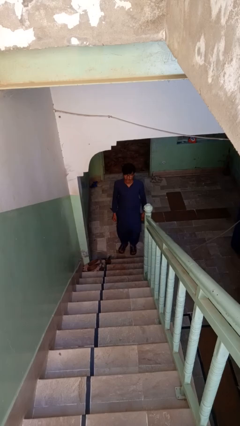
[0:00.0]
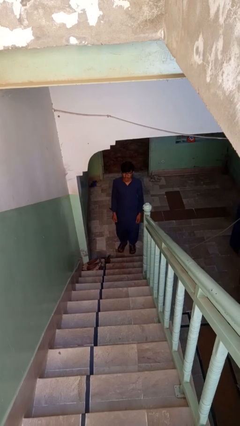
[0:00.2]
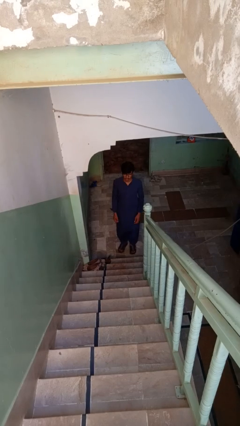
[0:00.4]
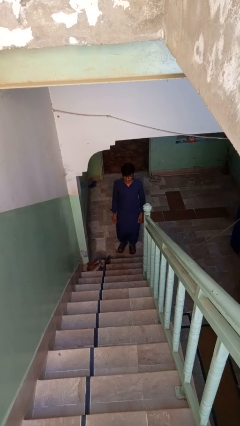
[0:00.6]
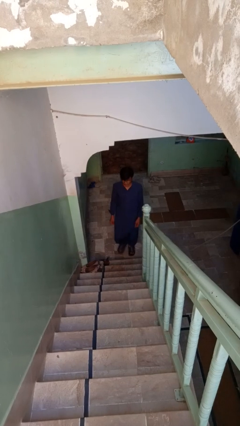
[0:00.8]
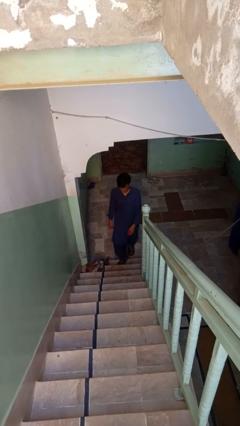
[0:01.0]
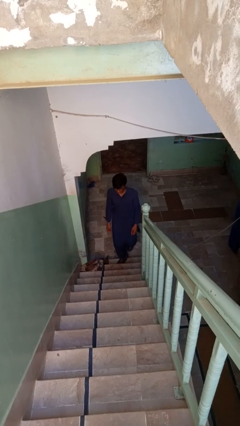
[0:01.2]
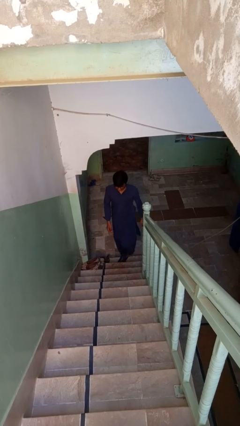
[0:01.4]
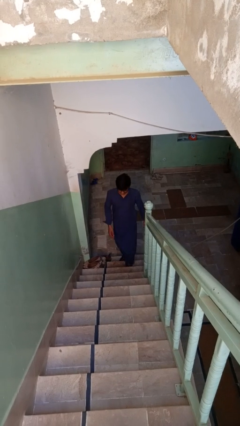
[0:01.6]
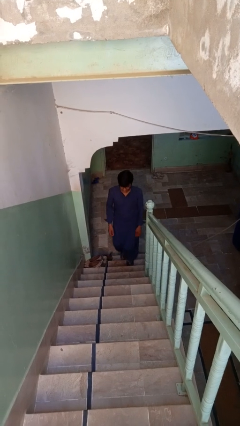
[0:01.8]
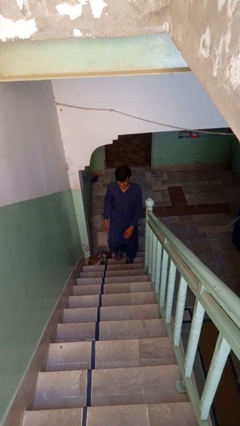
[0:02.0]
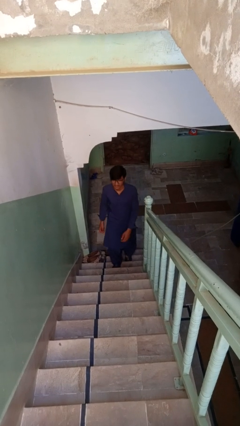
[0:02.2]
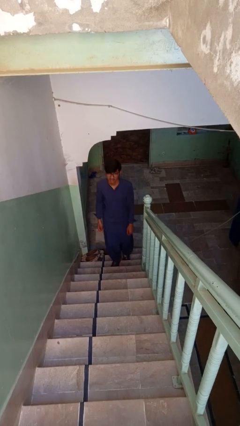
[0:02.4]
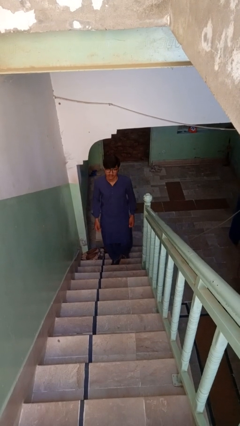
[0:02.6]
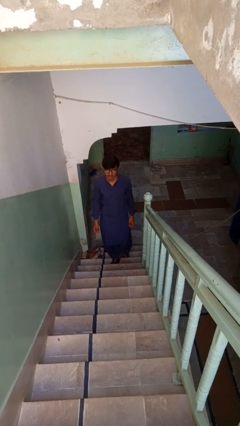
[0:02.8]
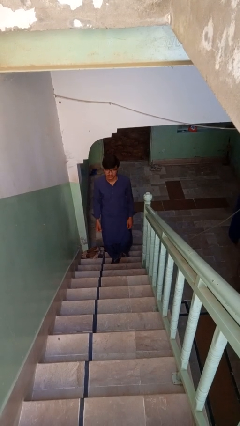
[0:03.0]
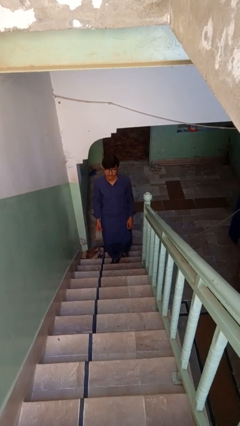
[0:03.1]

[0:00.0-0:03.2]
person climbs up stairs

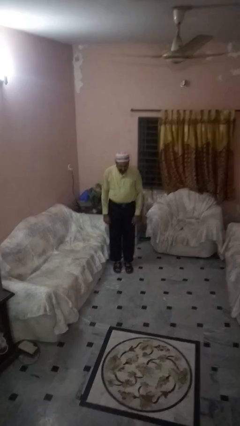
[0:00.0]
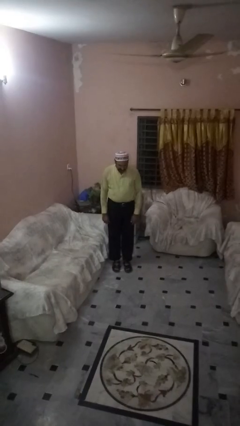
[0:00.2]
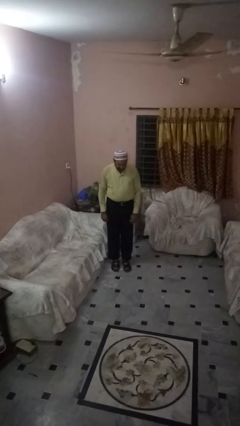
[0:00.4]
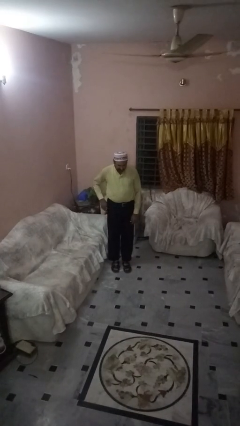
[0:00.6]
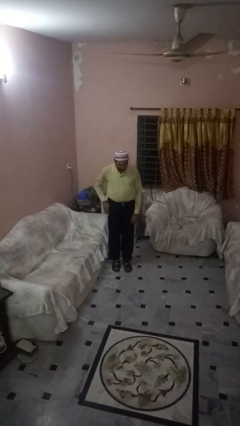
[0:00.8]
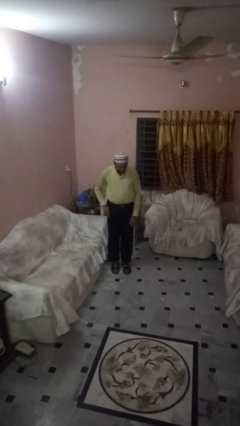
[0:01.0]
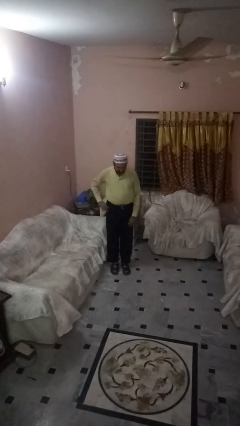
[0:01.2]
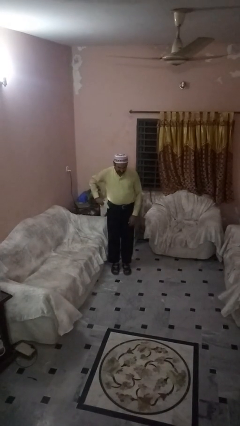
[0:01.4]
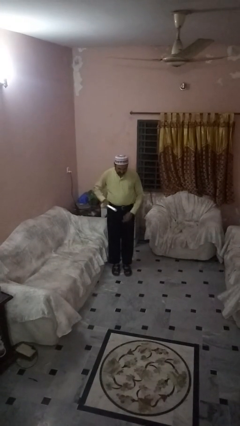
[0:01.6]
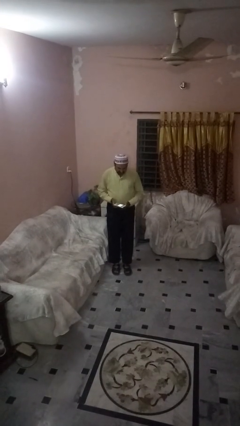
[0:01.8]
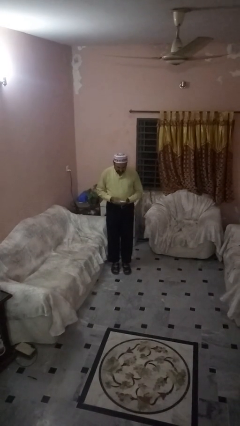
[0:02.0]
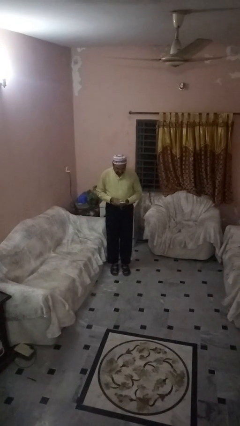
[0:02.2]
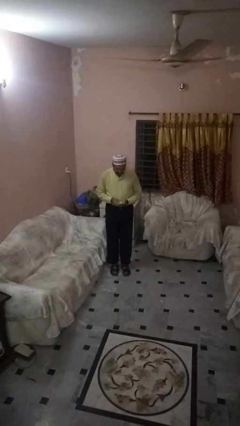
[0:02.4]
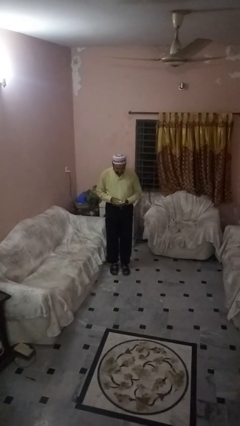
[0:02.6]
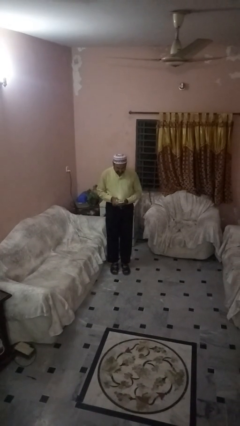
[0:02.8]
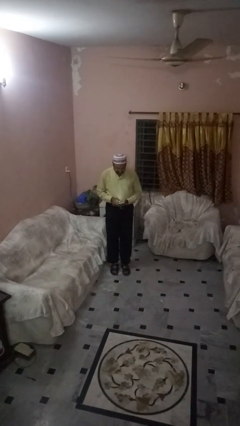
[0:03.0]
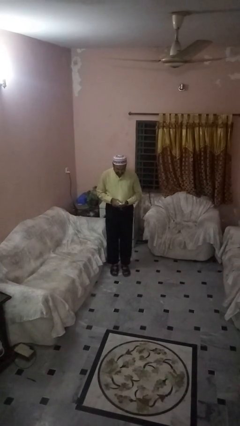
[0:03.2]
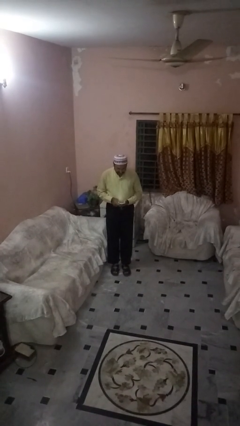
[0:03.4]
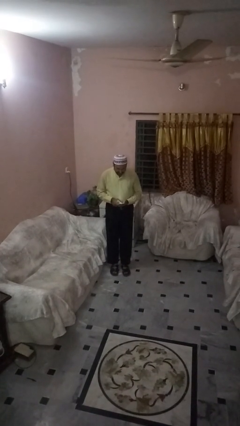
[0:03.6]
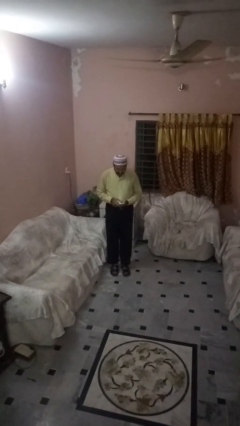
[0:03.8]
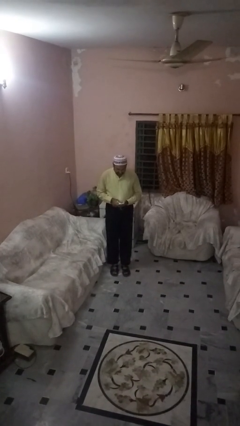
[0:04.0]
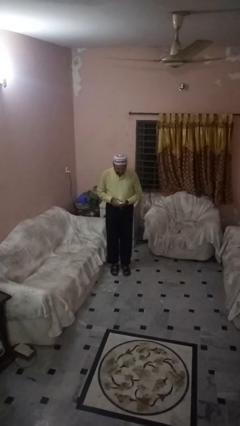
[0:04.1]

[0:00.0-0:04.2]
person takes phone from pocket

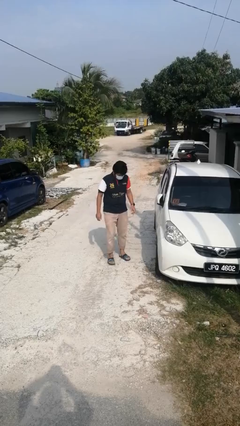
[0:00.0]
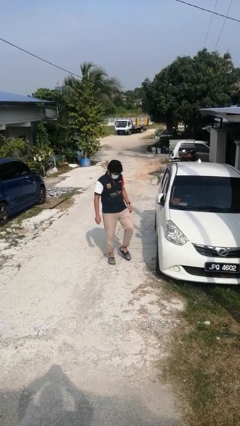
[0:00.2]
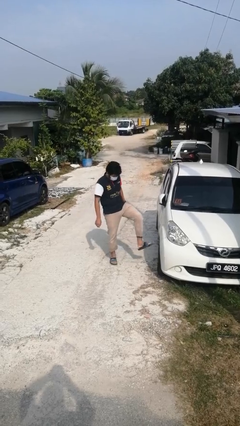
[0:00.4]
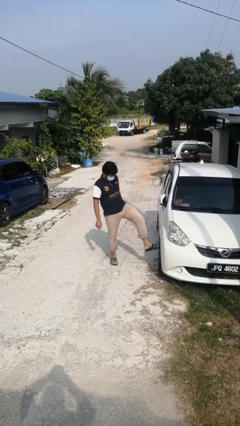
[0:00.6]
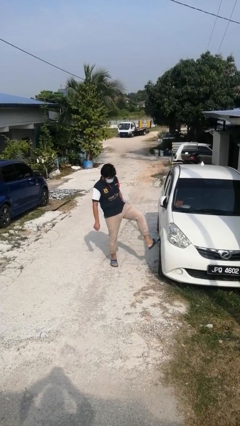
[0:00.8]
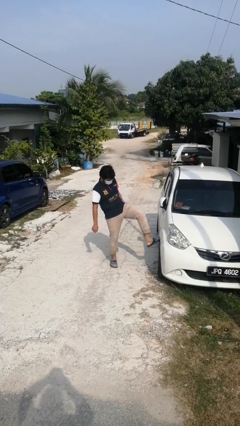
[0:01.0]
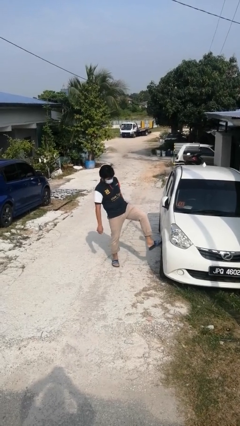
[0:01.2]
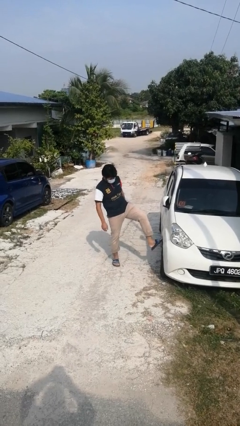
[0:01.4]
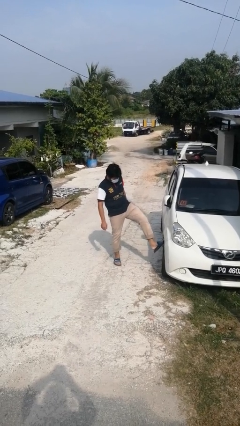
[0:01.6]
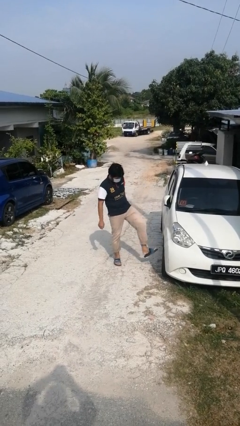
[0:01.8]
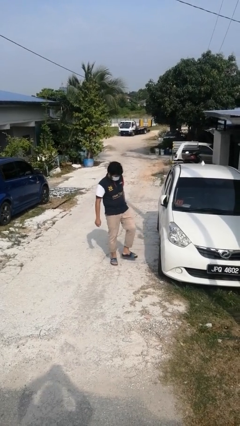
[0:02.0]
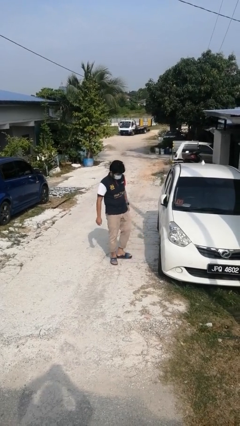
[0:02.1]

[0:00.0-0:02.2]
person kicks car tires

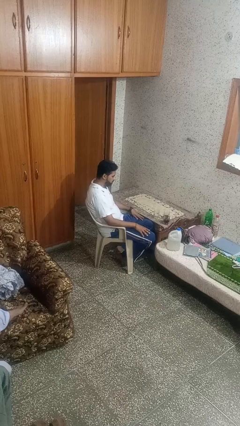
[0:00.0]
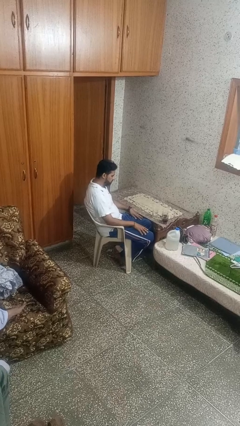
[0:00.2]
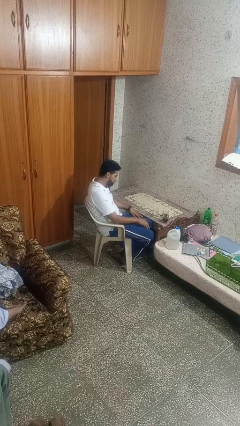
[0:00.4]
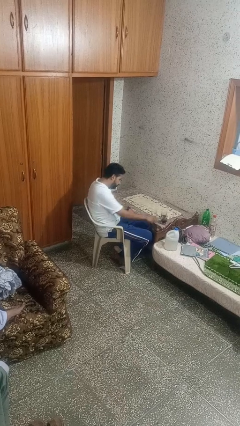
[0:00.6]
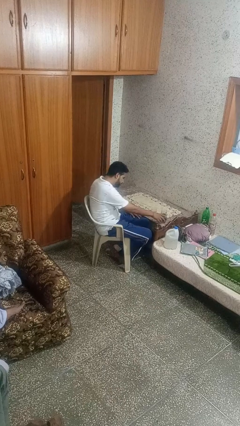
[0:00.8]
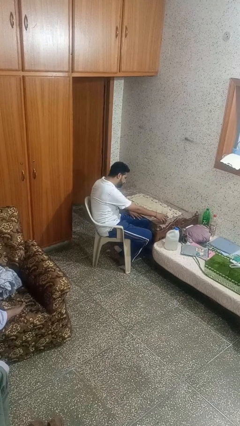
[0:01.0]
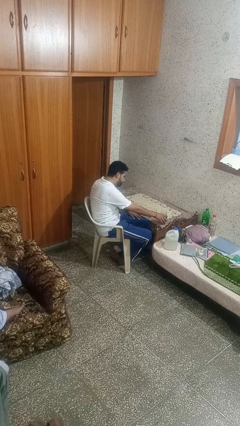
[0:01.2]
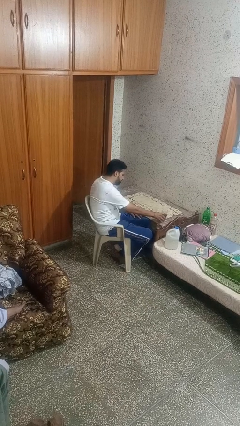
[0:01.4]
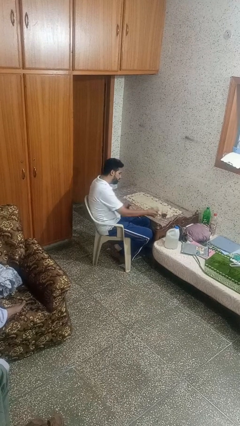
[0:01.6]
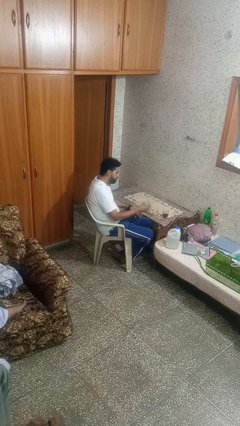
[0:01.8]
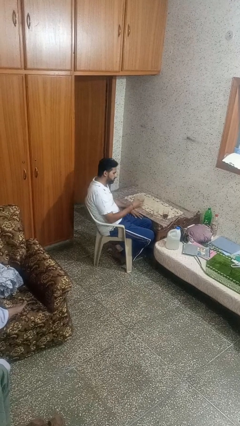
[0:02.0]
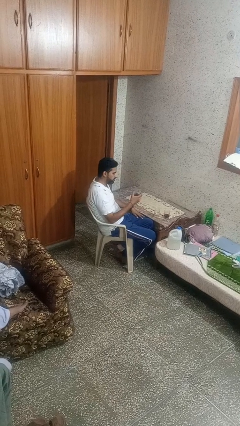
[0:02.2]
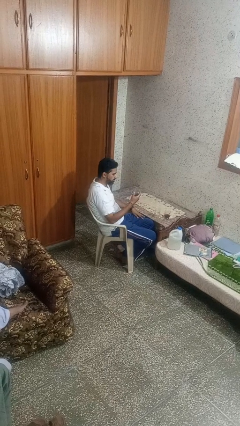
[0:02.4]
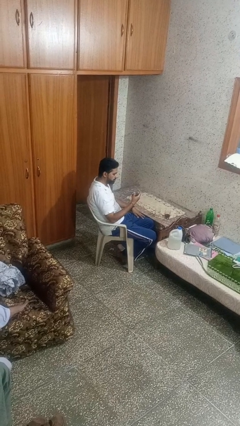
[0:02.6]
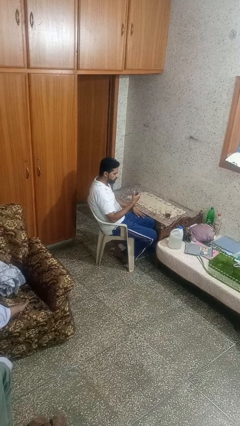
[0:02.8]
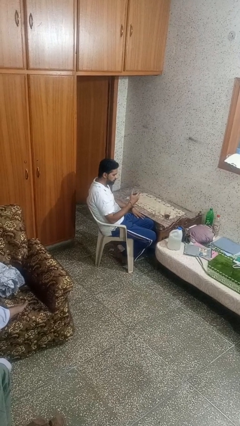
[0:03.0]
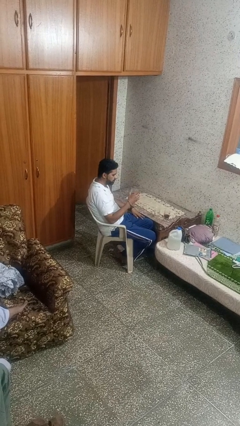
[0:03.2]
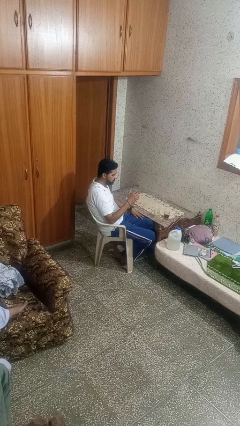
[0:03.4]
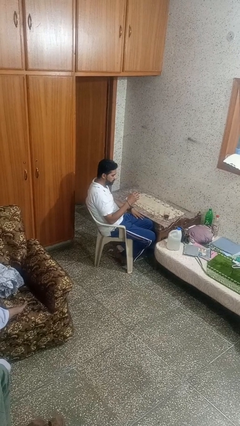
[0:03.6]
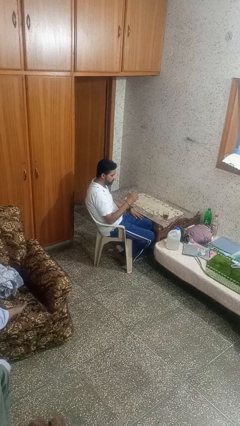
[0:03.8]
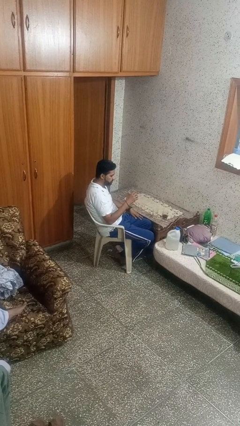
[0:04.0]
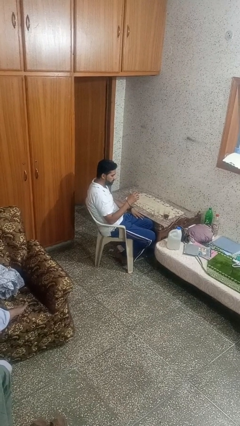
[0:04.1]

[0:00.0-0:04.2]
person picks up object from table

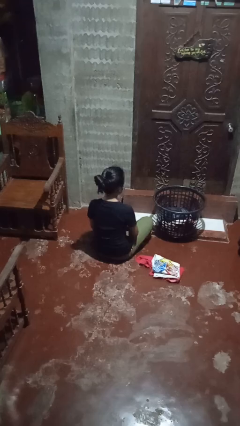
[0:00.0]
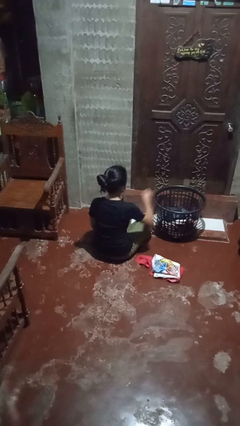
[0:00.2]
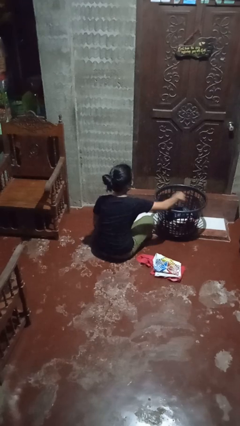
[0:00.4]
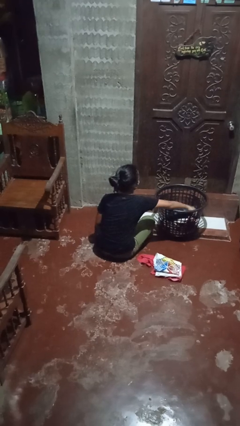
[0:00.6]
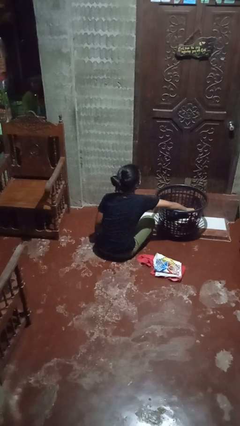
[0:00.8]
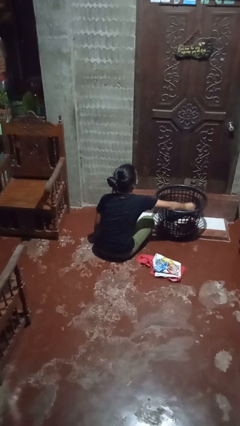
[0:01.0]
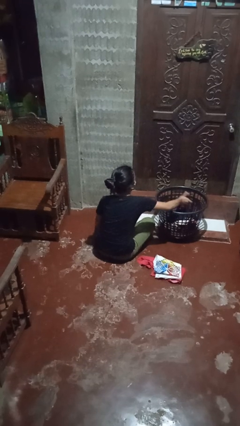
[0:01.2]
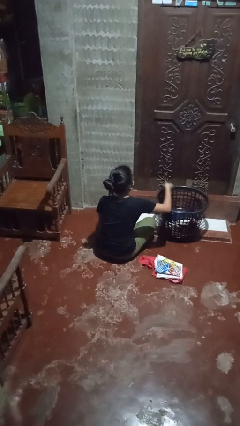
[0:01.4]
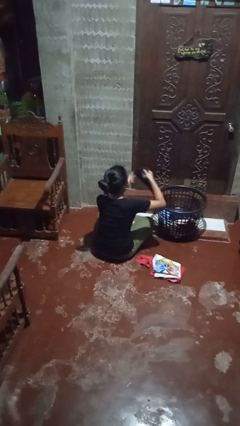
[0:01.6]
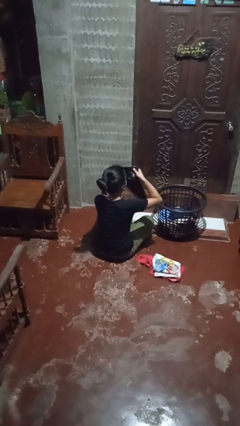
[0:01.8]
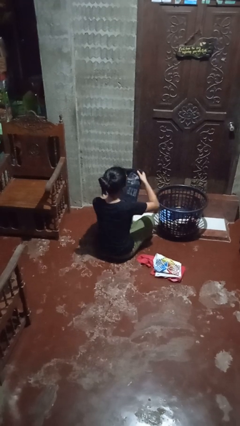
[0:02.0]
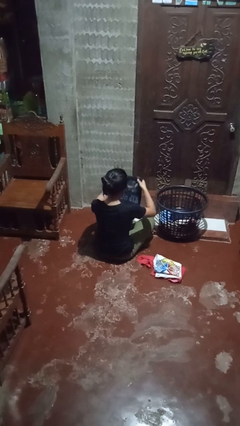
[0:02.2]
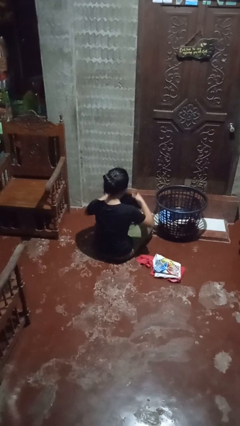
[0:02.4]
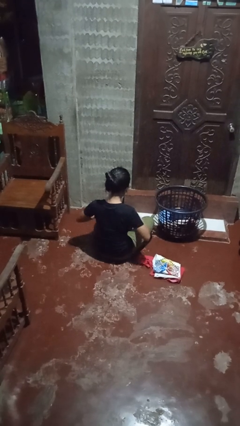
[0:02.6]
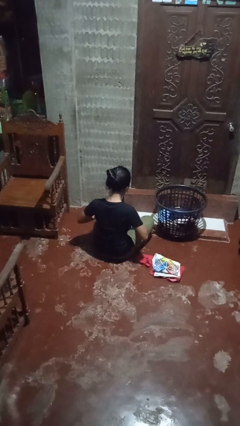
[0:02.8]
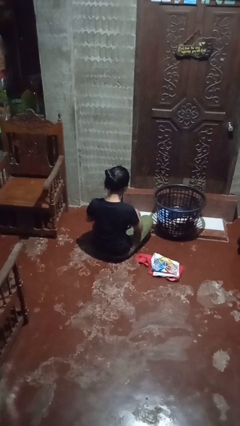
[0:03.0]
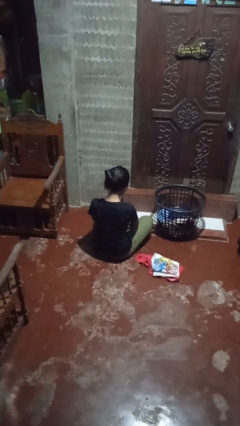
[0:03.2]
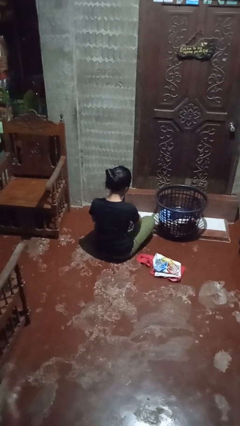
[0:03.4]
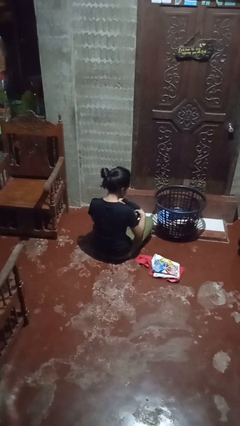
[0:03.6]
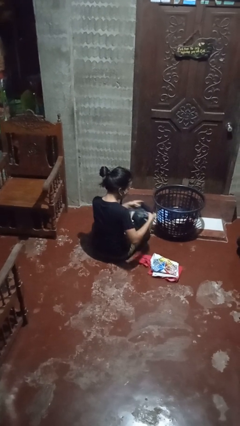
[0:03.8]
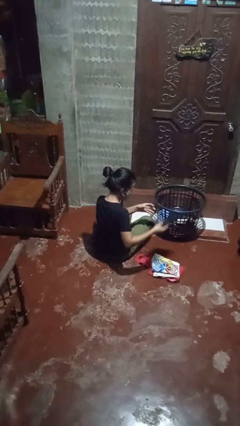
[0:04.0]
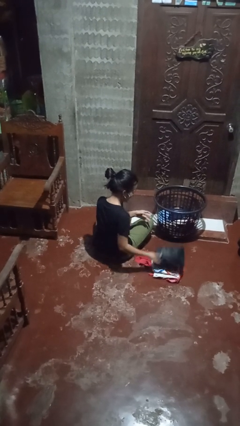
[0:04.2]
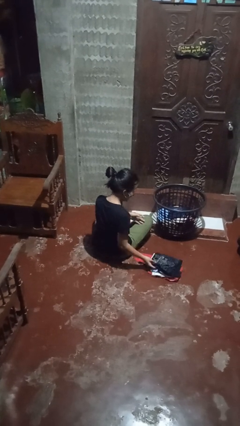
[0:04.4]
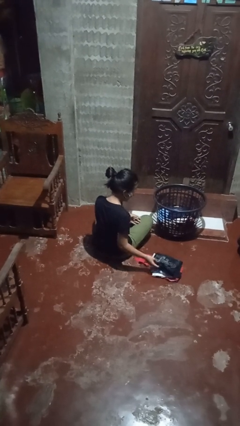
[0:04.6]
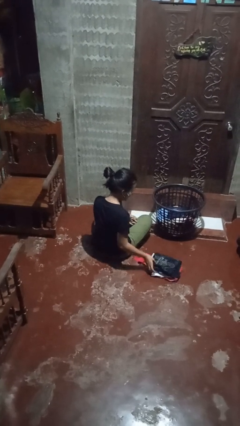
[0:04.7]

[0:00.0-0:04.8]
person folds shirt
